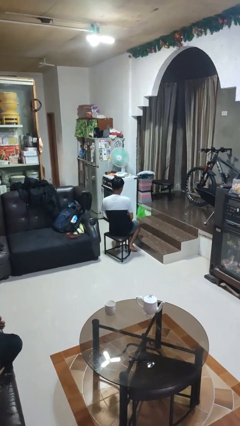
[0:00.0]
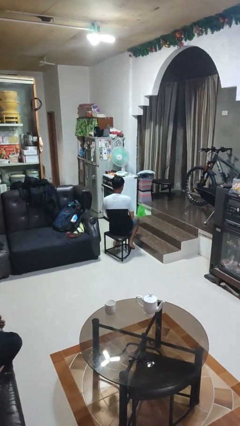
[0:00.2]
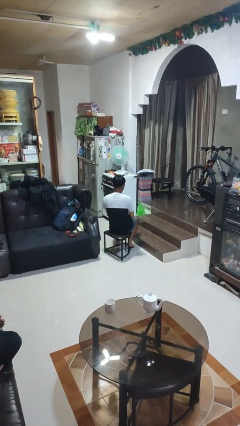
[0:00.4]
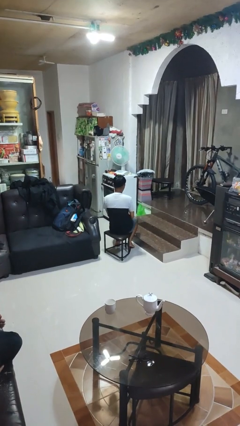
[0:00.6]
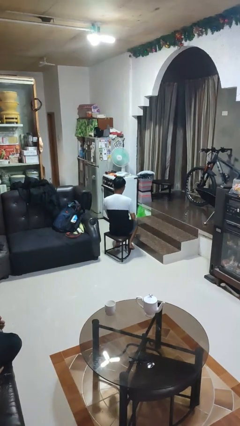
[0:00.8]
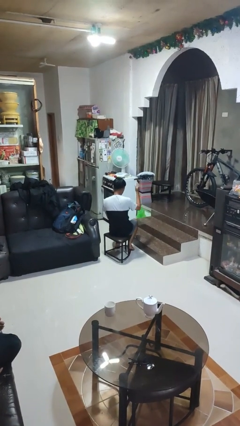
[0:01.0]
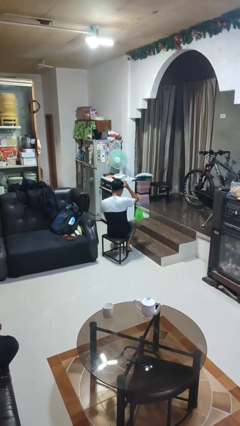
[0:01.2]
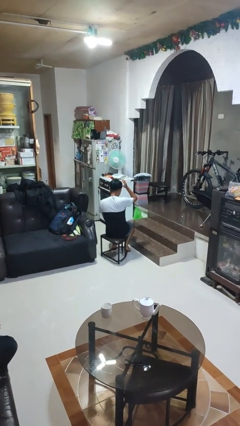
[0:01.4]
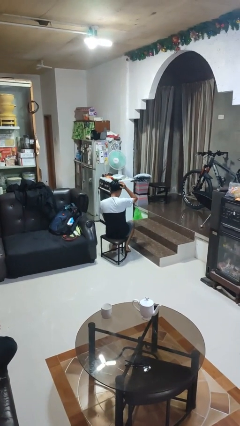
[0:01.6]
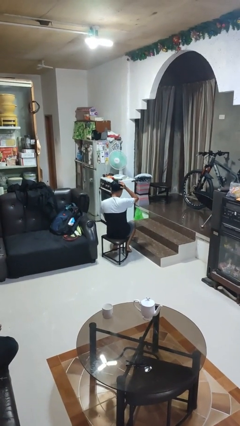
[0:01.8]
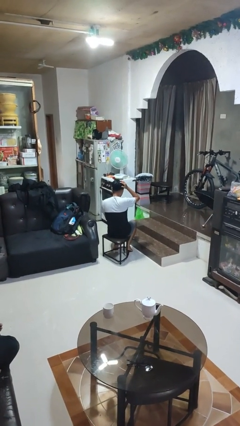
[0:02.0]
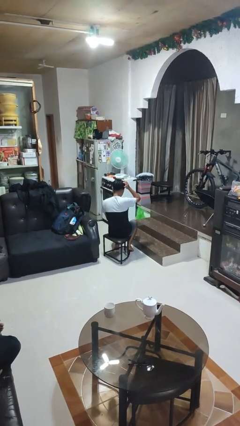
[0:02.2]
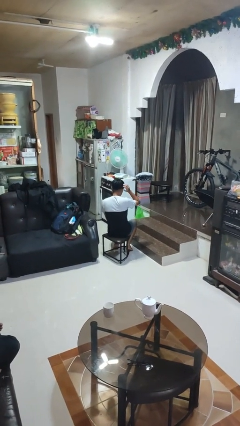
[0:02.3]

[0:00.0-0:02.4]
person pats head

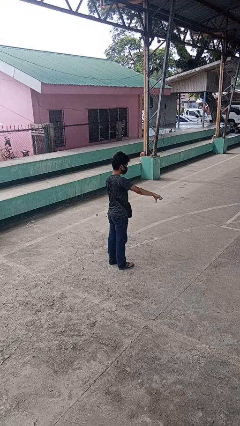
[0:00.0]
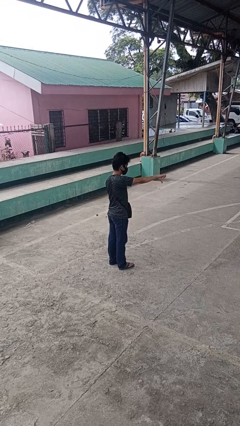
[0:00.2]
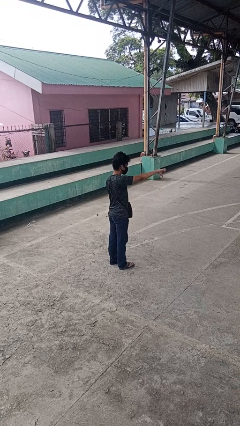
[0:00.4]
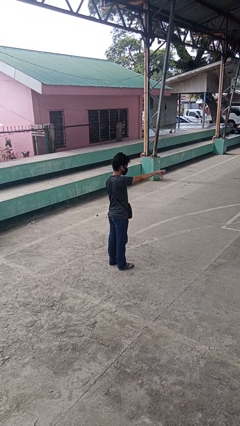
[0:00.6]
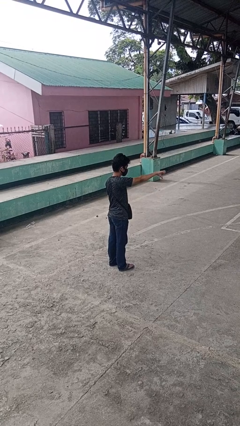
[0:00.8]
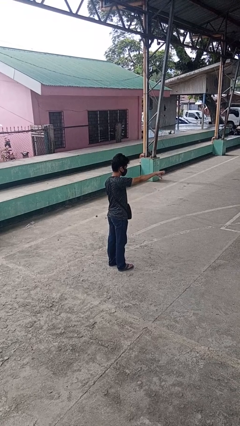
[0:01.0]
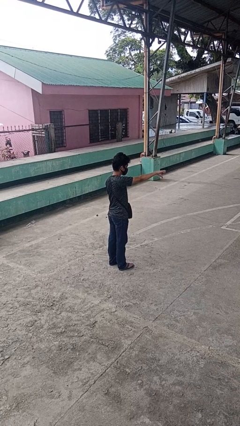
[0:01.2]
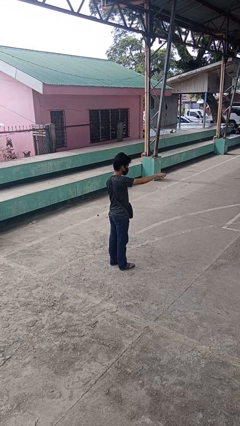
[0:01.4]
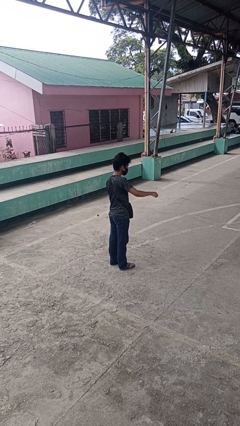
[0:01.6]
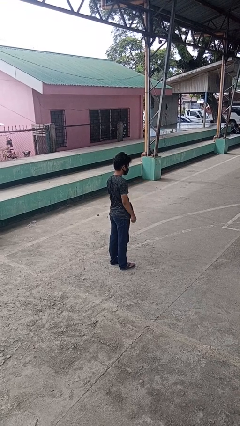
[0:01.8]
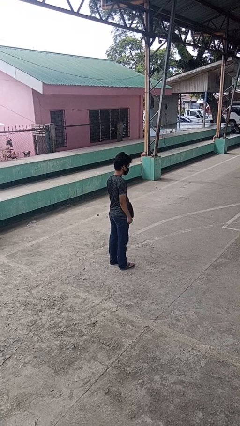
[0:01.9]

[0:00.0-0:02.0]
person gestures thumbs down

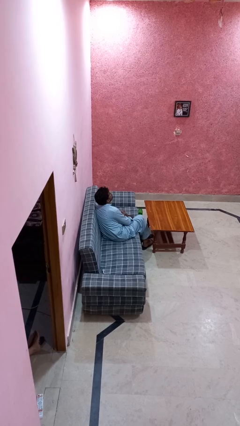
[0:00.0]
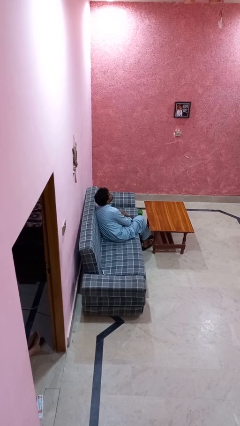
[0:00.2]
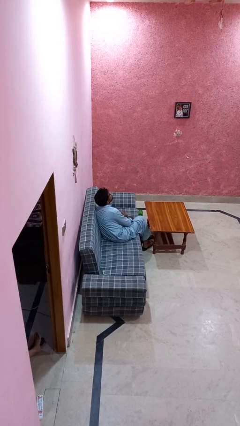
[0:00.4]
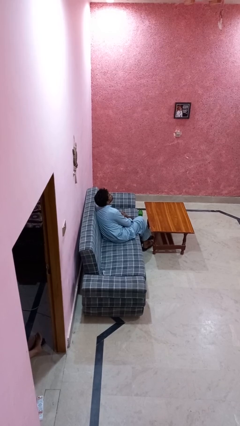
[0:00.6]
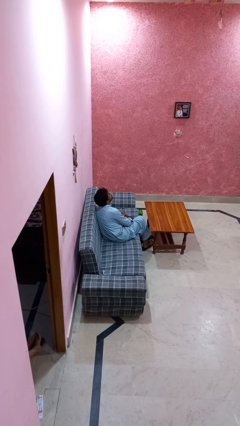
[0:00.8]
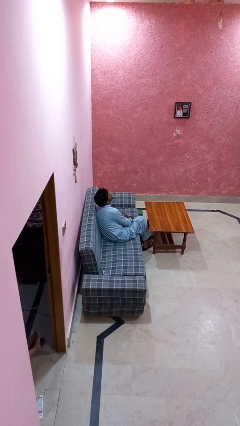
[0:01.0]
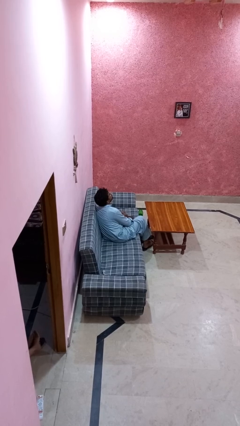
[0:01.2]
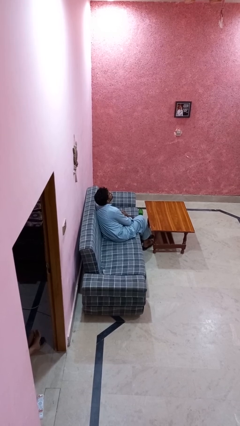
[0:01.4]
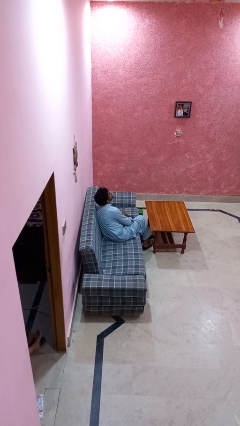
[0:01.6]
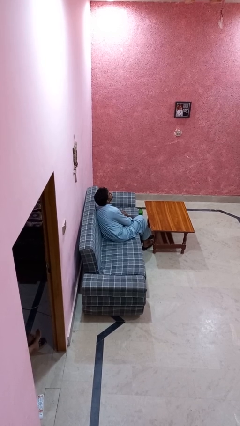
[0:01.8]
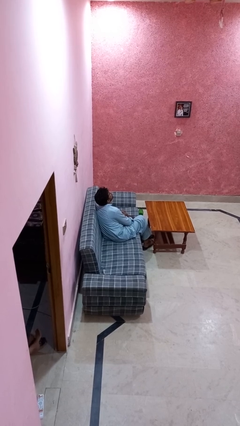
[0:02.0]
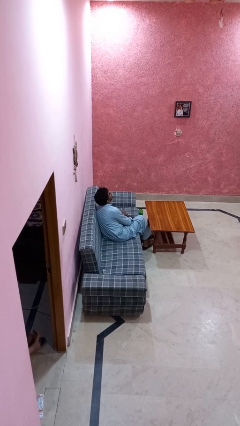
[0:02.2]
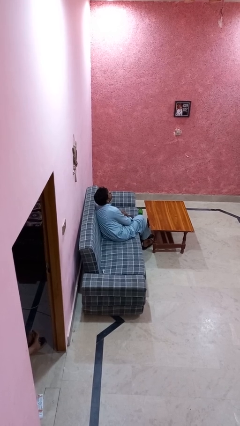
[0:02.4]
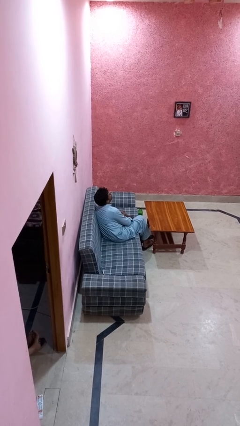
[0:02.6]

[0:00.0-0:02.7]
person sticks out tongue

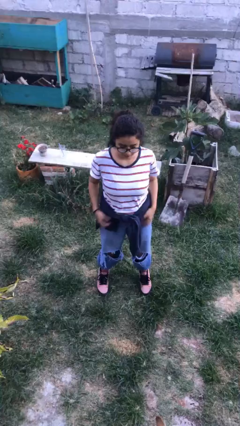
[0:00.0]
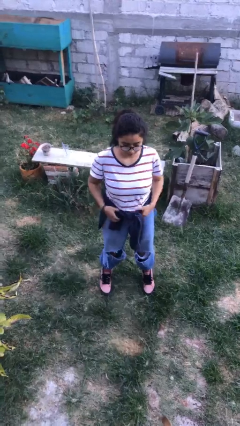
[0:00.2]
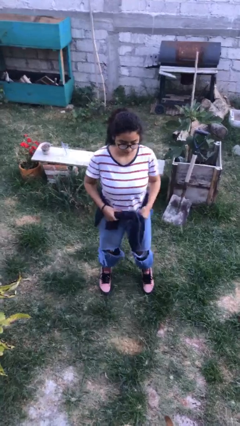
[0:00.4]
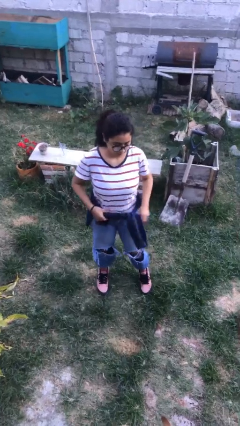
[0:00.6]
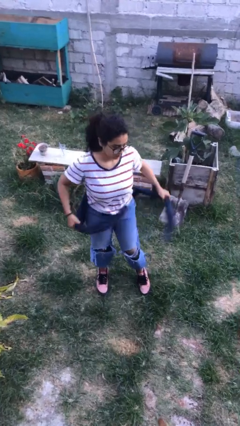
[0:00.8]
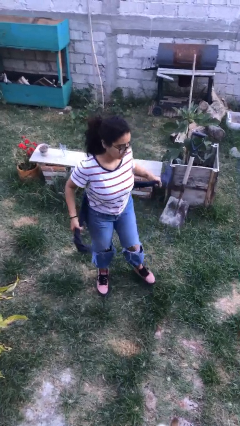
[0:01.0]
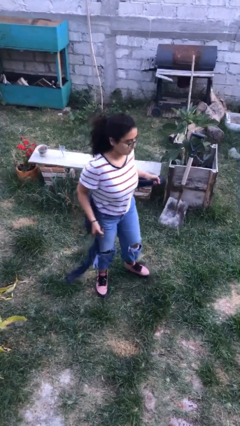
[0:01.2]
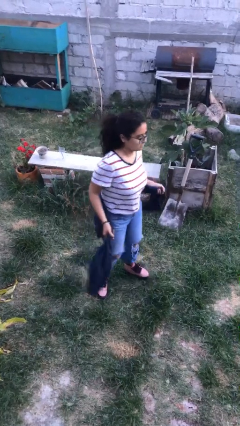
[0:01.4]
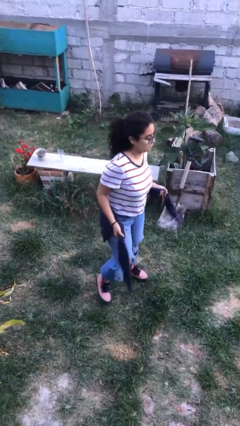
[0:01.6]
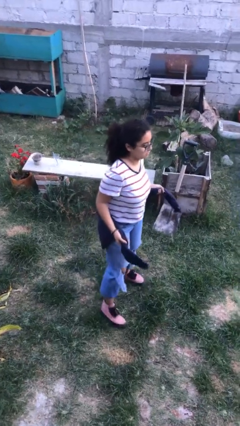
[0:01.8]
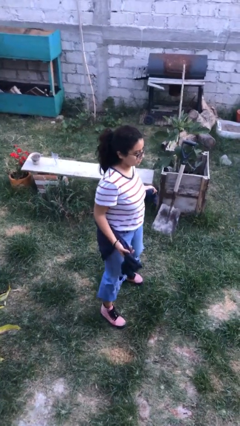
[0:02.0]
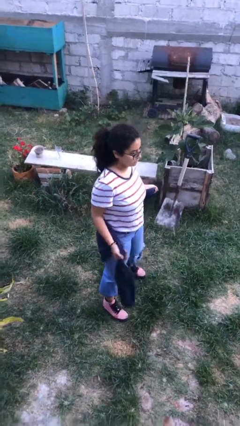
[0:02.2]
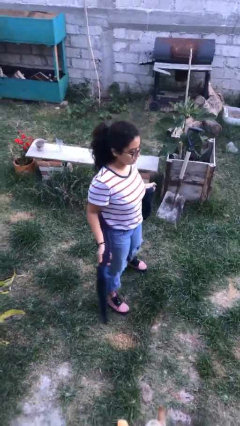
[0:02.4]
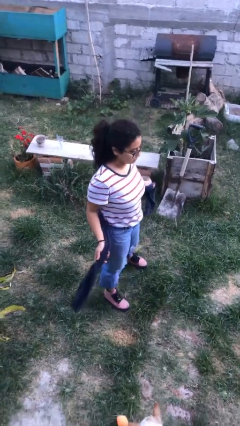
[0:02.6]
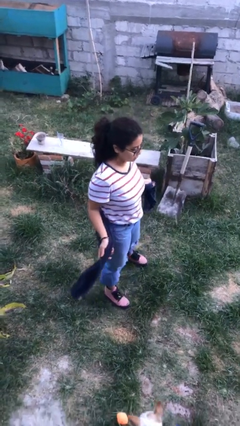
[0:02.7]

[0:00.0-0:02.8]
person unties jacket around waist

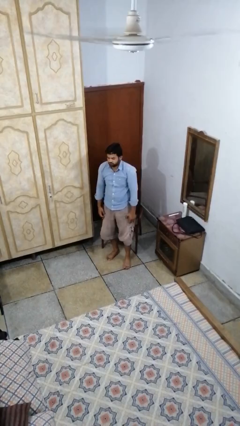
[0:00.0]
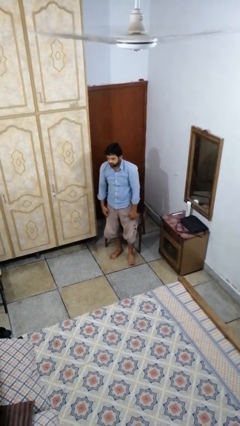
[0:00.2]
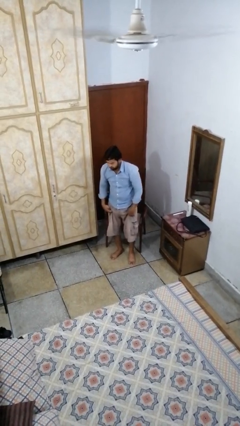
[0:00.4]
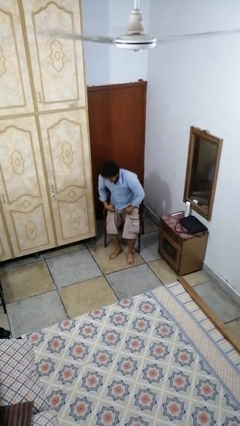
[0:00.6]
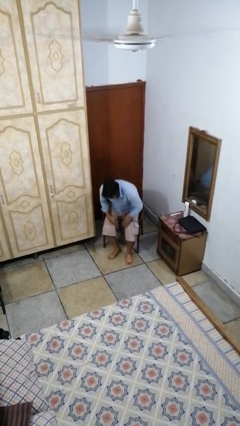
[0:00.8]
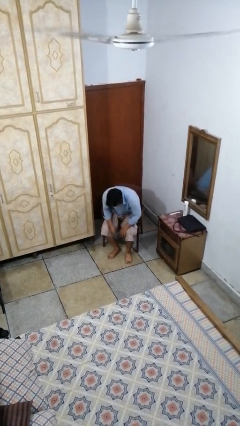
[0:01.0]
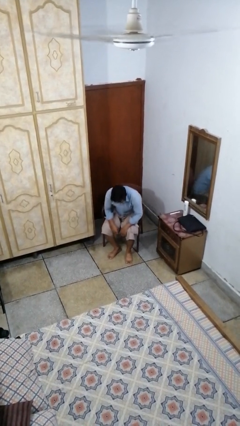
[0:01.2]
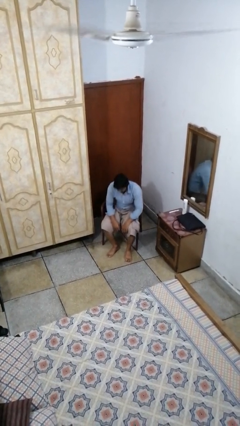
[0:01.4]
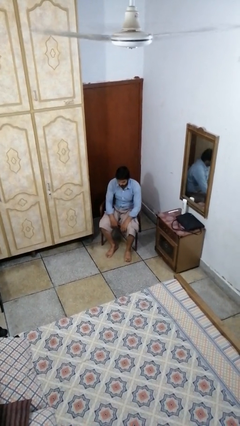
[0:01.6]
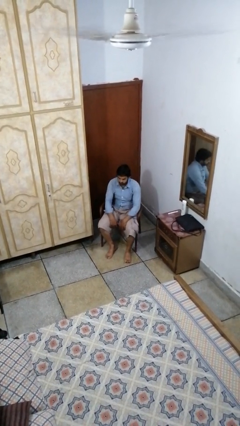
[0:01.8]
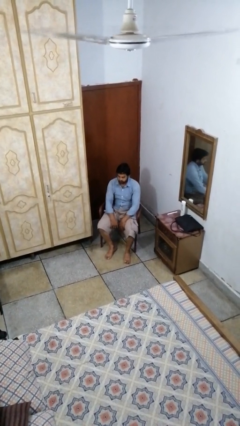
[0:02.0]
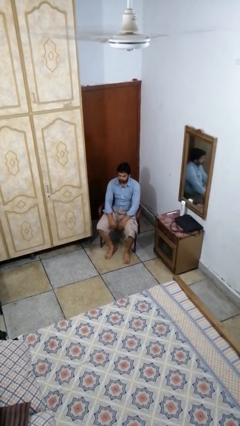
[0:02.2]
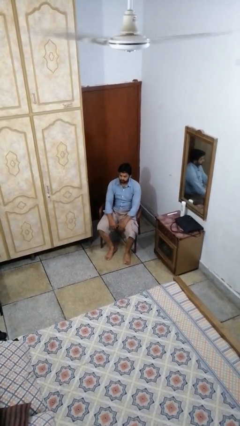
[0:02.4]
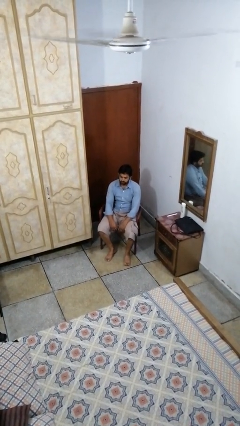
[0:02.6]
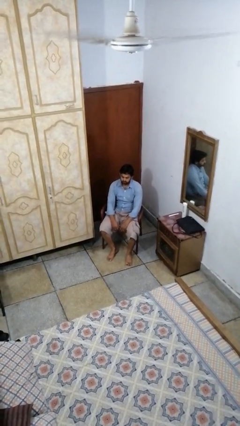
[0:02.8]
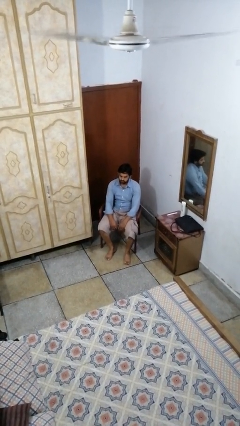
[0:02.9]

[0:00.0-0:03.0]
person sits down

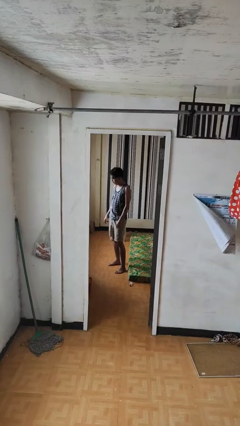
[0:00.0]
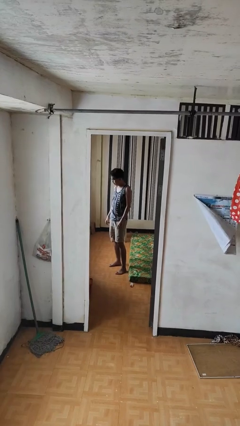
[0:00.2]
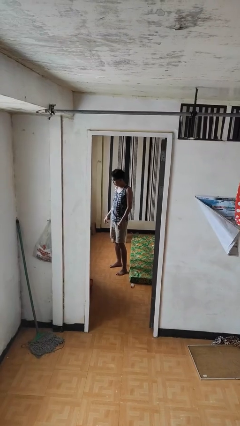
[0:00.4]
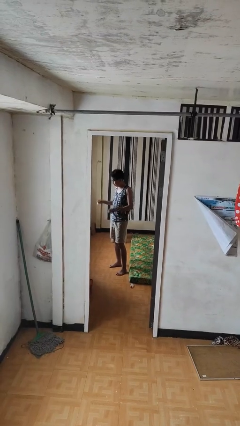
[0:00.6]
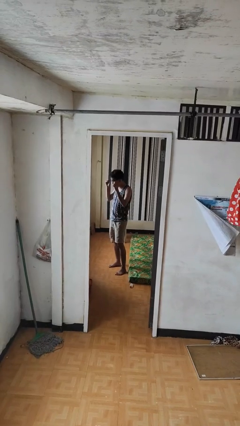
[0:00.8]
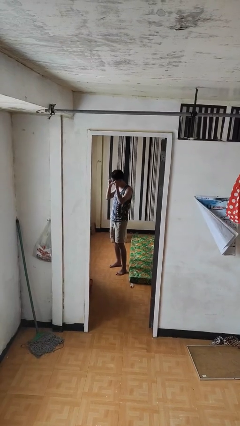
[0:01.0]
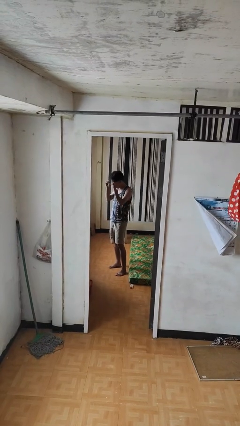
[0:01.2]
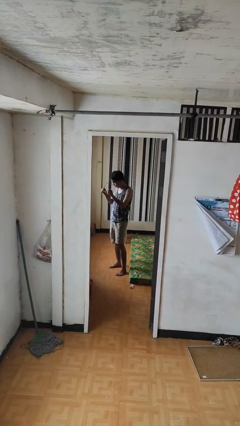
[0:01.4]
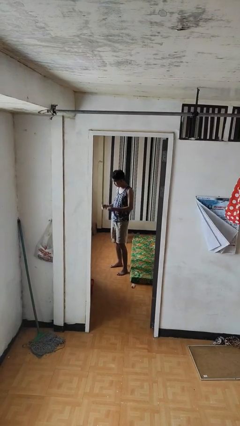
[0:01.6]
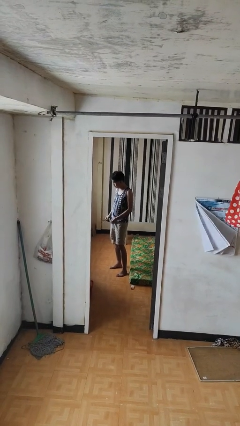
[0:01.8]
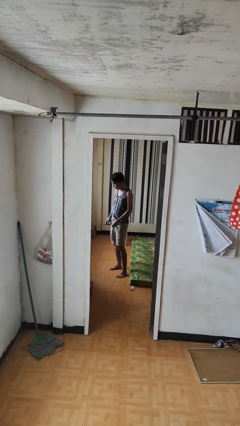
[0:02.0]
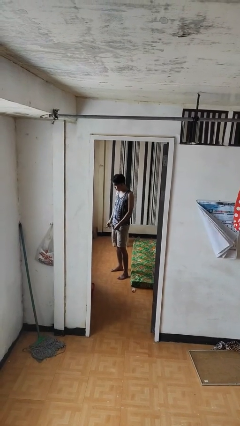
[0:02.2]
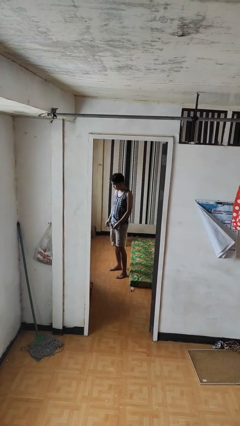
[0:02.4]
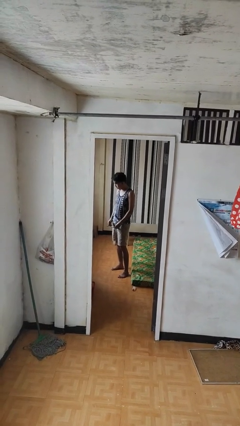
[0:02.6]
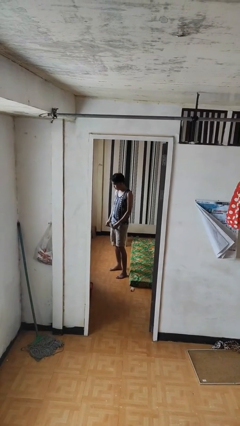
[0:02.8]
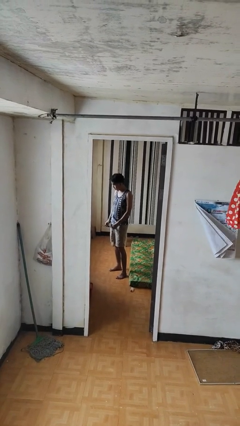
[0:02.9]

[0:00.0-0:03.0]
person takes off glasses

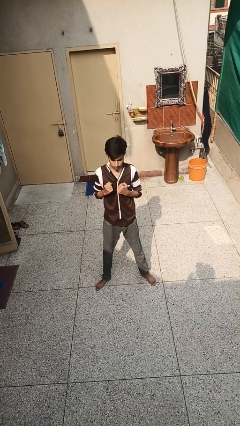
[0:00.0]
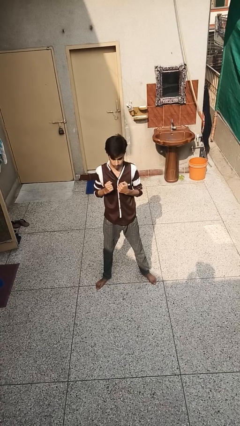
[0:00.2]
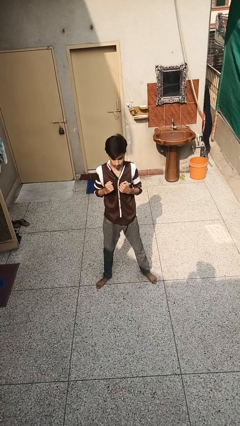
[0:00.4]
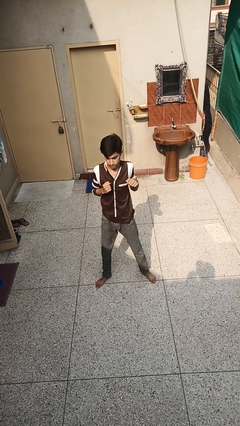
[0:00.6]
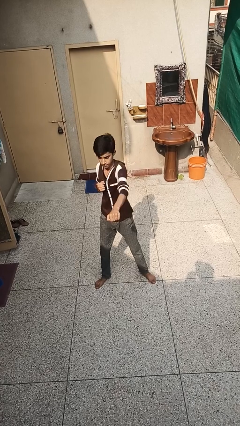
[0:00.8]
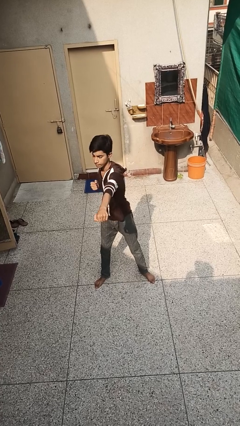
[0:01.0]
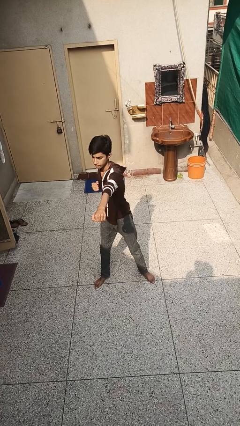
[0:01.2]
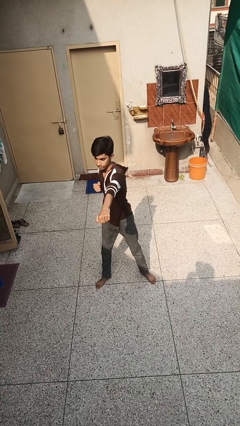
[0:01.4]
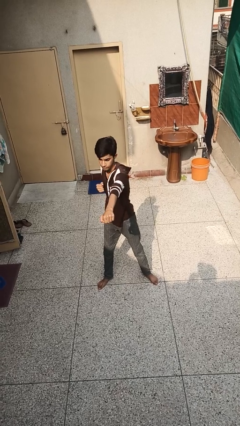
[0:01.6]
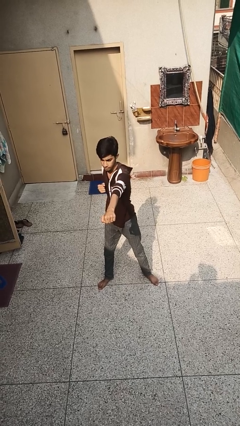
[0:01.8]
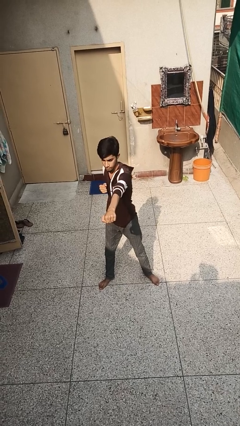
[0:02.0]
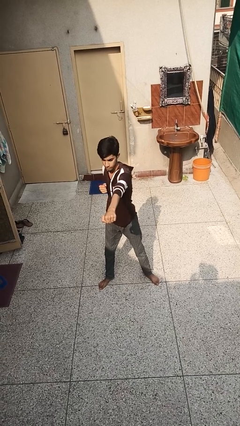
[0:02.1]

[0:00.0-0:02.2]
person punches
